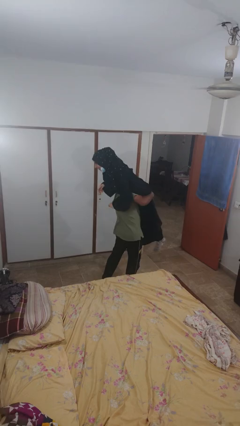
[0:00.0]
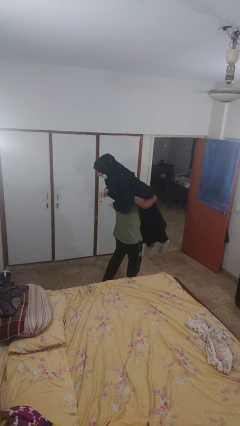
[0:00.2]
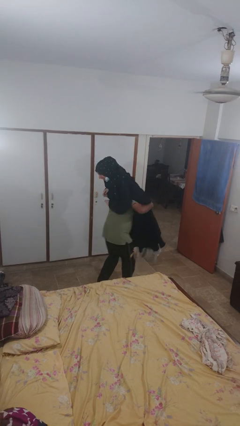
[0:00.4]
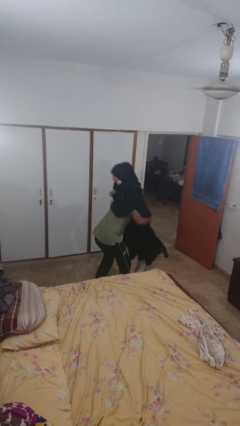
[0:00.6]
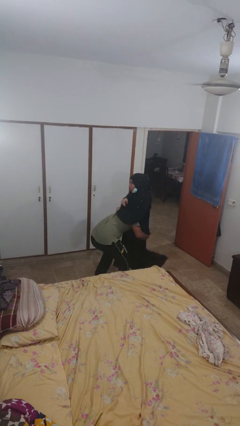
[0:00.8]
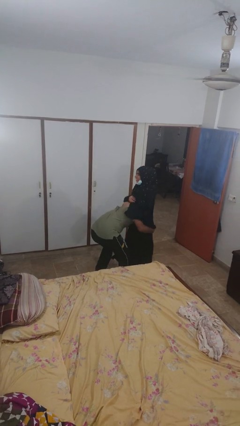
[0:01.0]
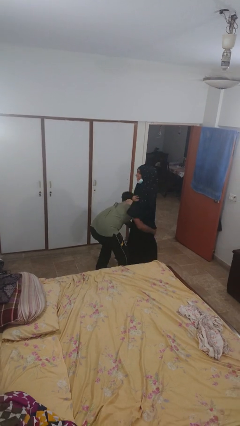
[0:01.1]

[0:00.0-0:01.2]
person puts down person

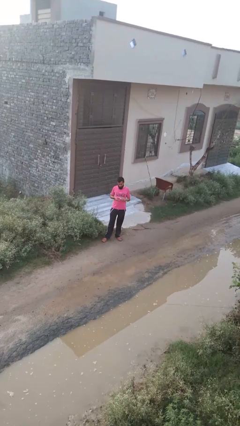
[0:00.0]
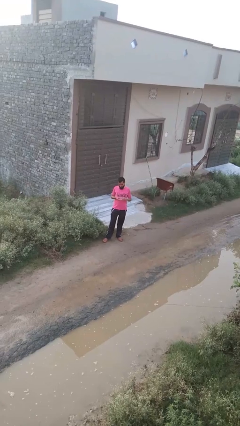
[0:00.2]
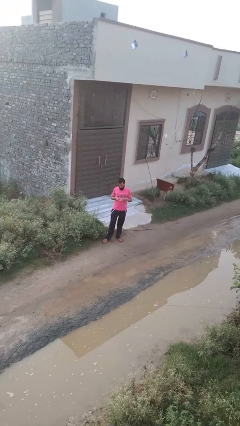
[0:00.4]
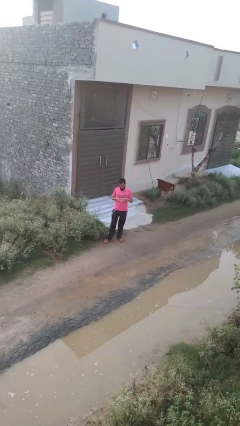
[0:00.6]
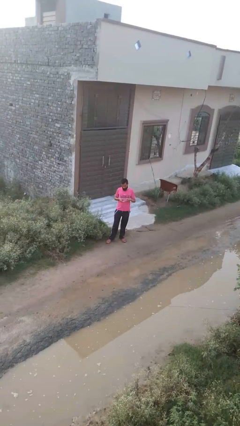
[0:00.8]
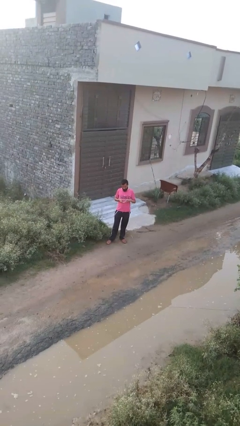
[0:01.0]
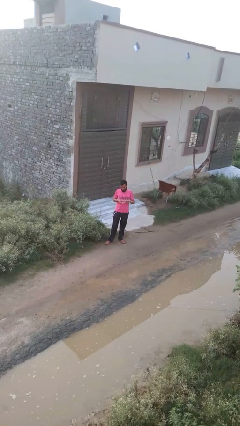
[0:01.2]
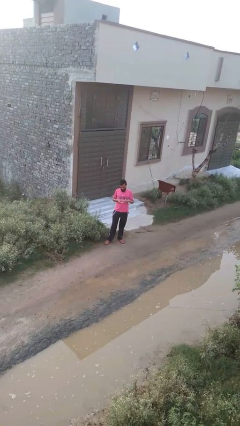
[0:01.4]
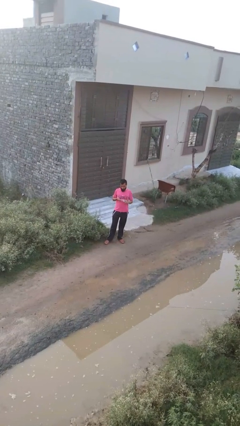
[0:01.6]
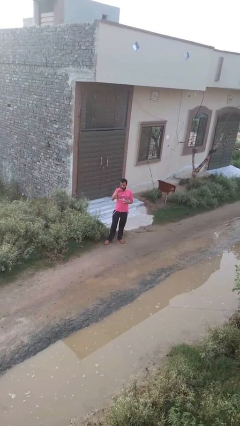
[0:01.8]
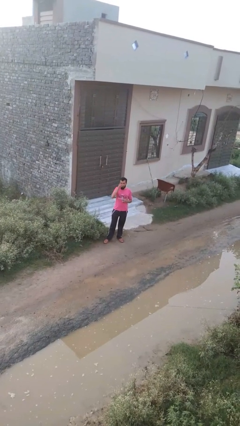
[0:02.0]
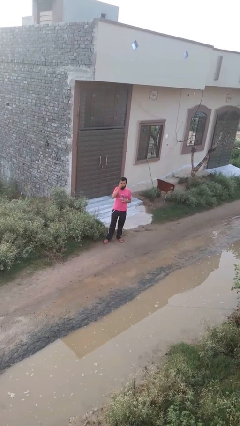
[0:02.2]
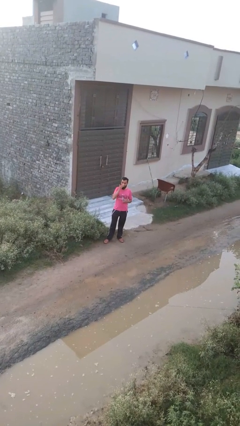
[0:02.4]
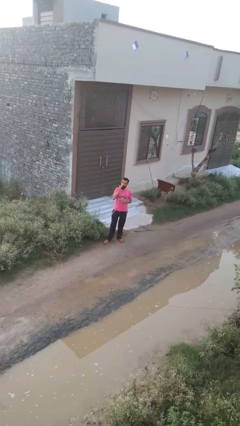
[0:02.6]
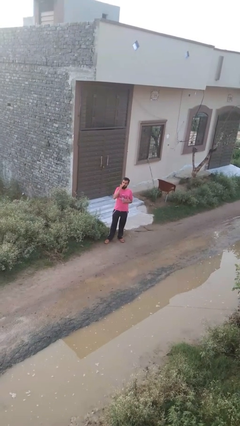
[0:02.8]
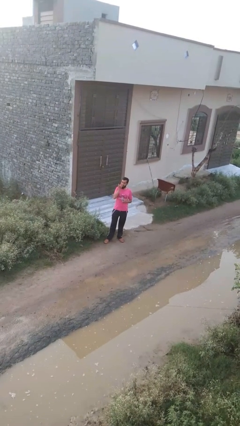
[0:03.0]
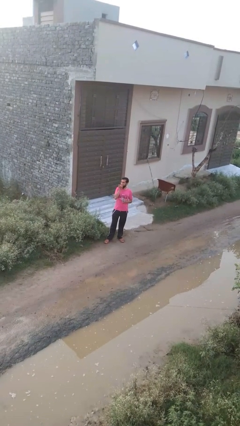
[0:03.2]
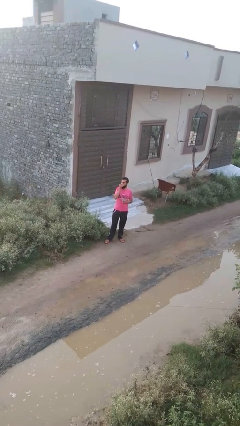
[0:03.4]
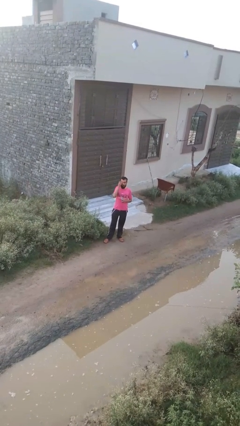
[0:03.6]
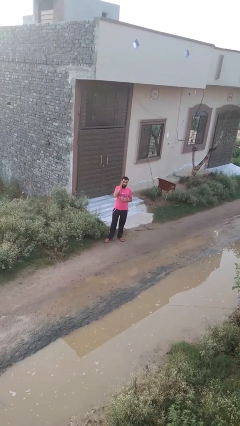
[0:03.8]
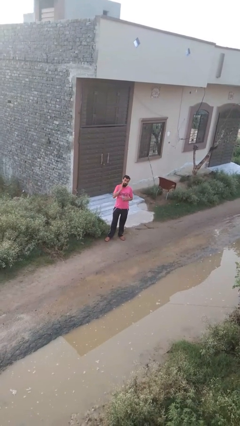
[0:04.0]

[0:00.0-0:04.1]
person applies facial moisturizer

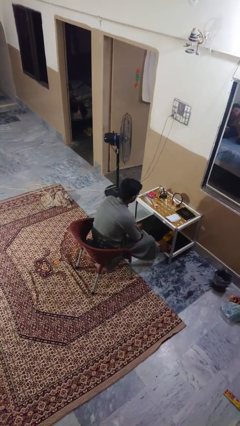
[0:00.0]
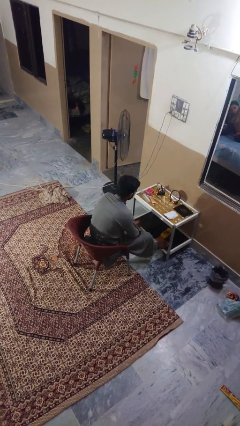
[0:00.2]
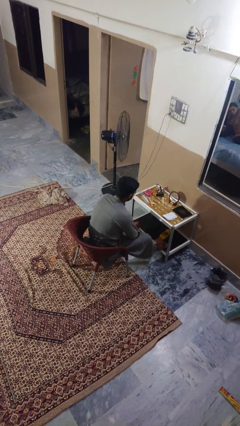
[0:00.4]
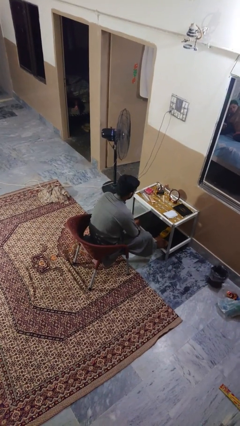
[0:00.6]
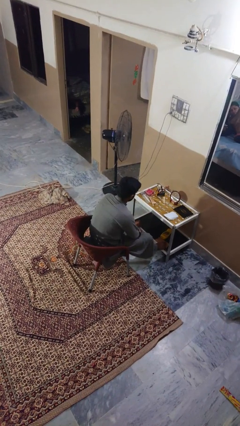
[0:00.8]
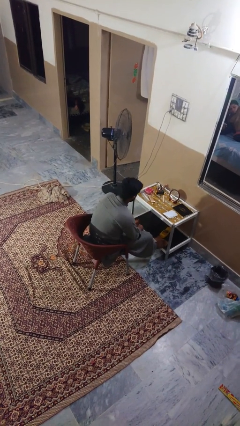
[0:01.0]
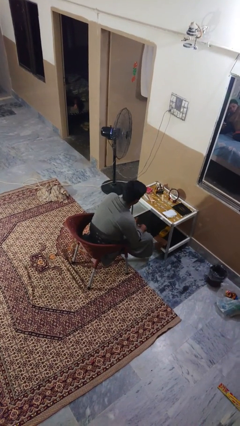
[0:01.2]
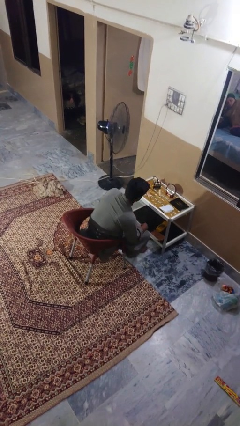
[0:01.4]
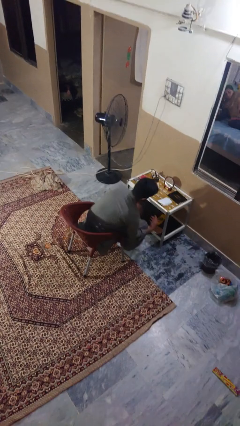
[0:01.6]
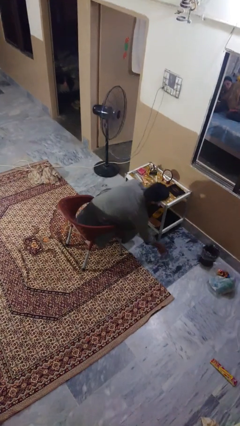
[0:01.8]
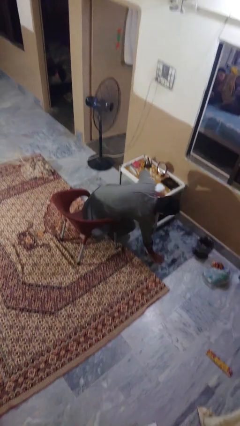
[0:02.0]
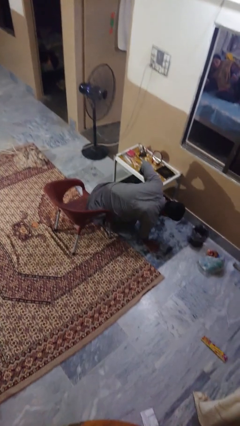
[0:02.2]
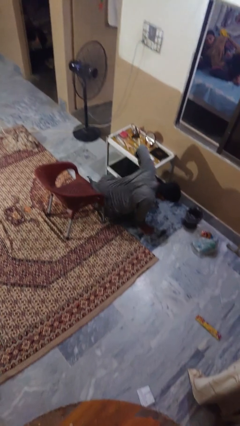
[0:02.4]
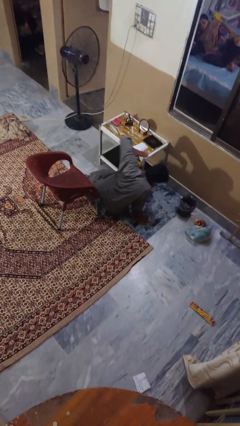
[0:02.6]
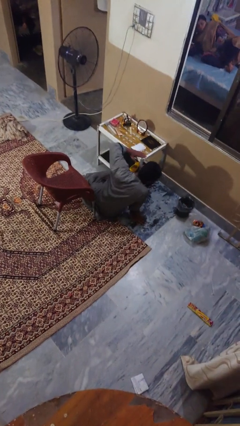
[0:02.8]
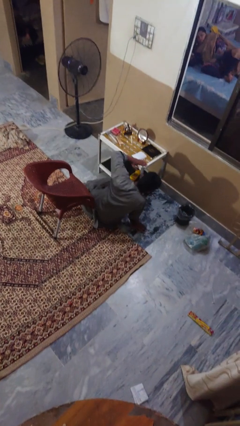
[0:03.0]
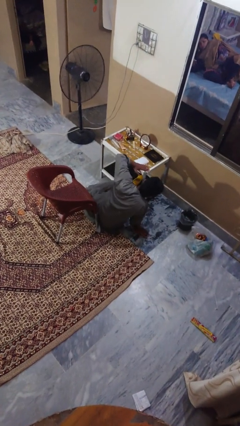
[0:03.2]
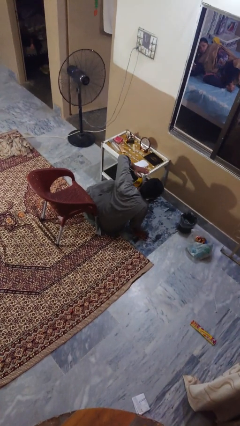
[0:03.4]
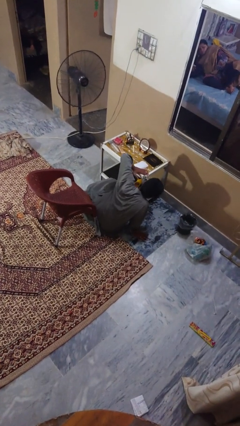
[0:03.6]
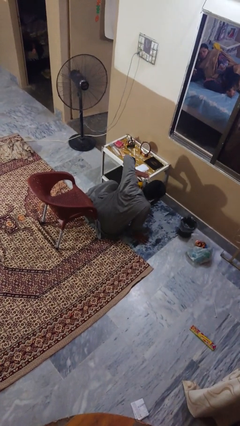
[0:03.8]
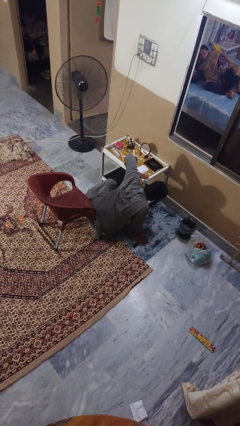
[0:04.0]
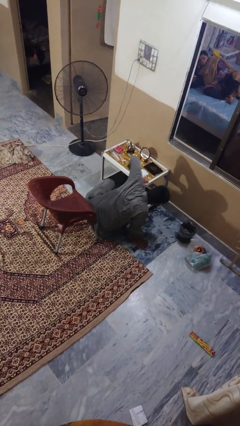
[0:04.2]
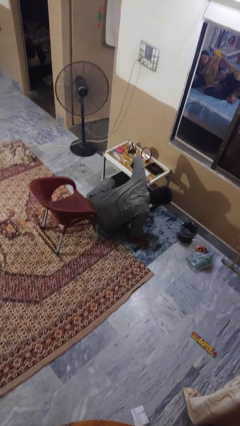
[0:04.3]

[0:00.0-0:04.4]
person falls from chair

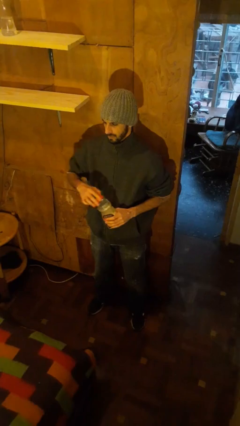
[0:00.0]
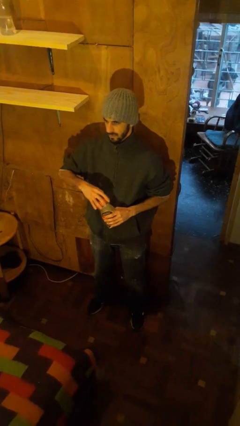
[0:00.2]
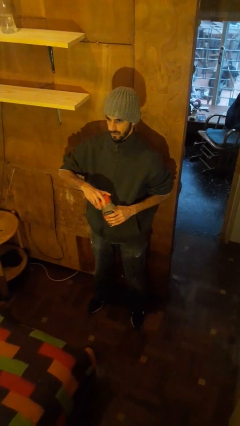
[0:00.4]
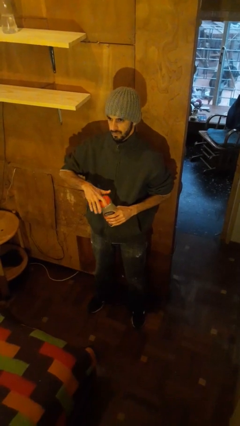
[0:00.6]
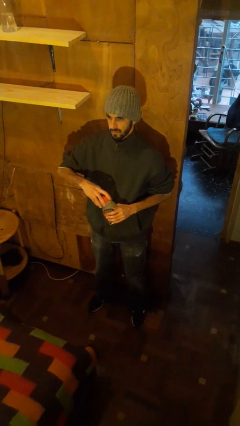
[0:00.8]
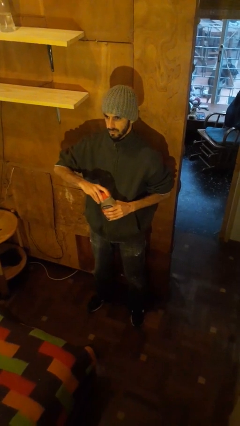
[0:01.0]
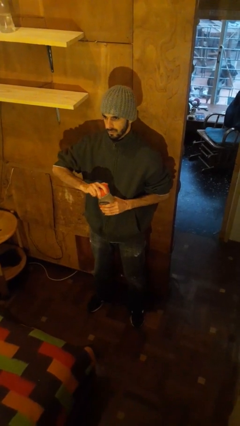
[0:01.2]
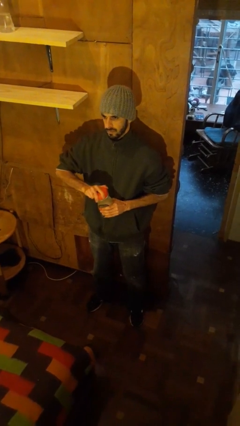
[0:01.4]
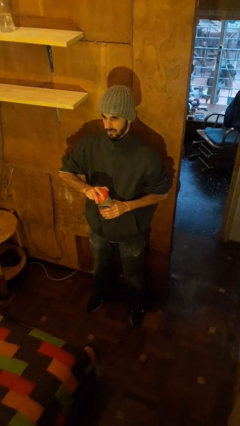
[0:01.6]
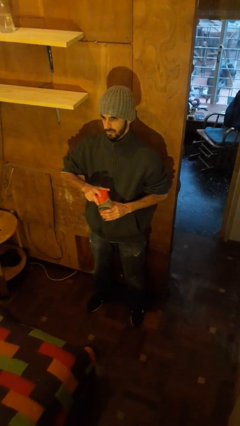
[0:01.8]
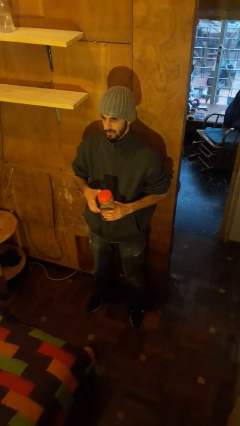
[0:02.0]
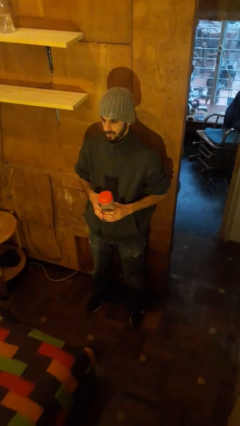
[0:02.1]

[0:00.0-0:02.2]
person closes jar

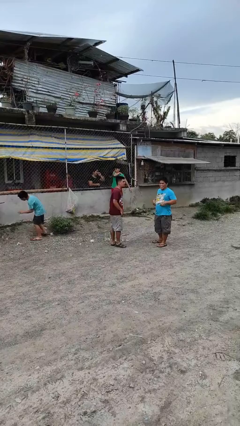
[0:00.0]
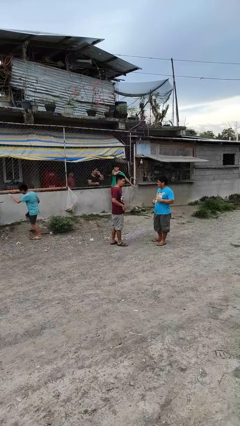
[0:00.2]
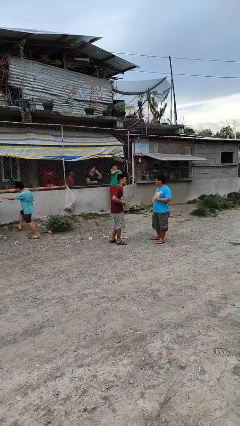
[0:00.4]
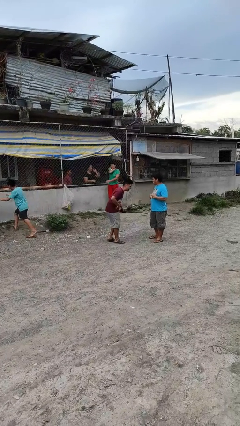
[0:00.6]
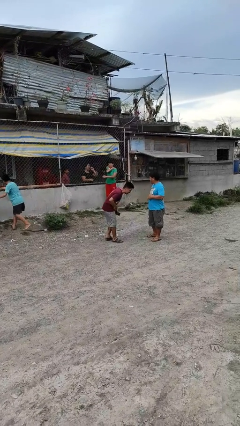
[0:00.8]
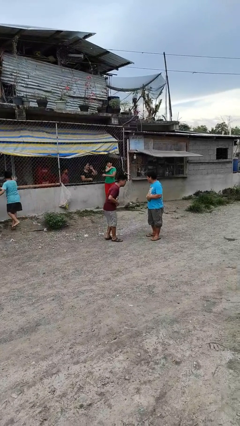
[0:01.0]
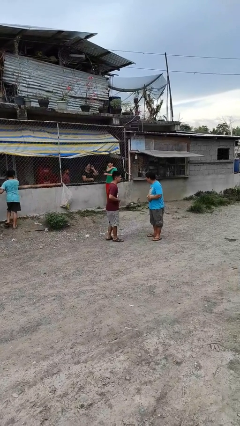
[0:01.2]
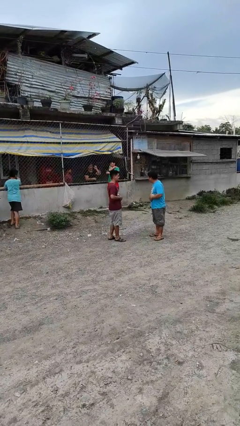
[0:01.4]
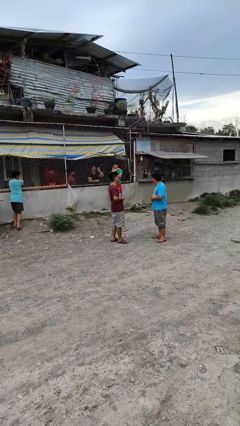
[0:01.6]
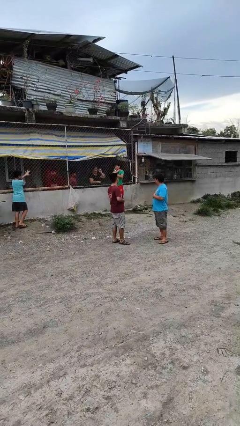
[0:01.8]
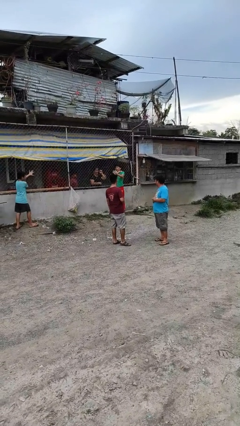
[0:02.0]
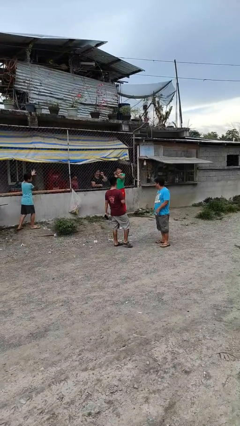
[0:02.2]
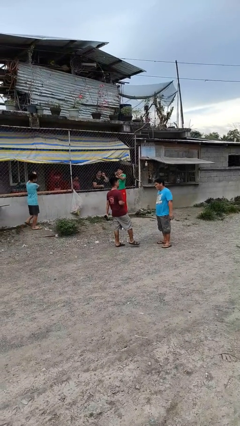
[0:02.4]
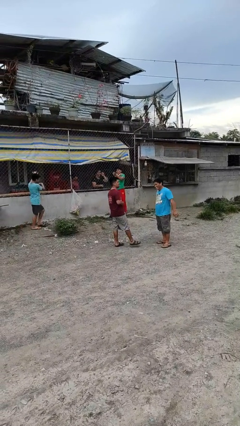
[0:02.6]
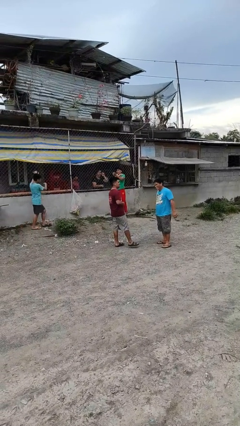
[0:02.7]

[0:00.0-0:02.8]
person laughs with person

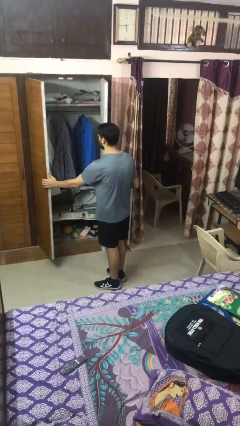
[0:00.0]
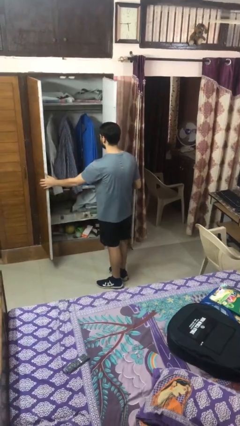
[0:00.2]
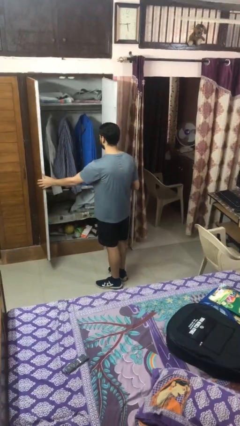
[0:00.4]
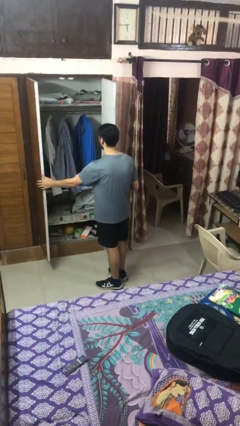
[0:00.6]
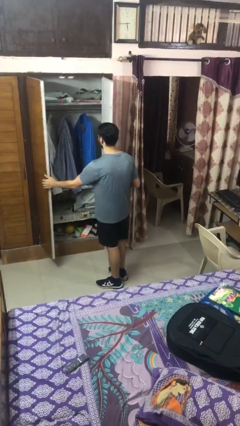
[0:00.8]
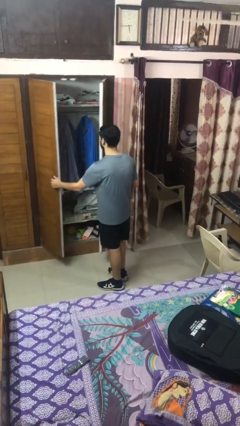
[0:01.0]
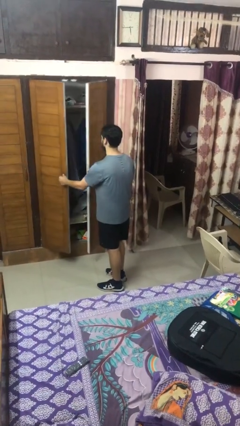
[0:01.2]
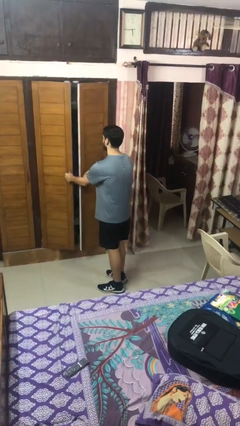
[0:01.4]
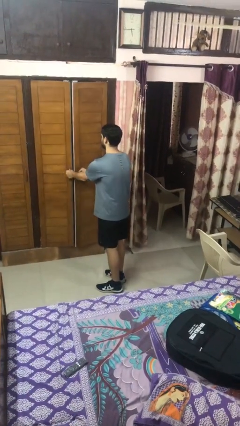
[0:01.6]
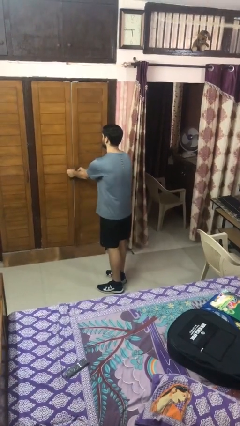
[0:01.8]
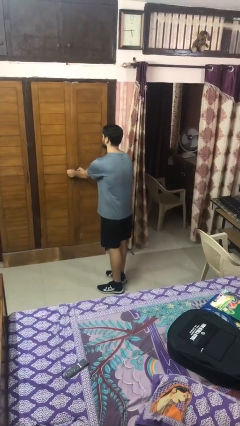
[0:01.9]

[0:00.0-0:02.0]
person closes closet door

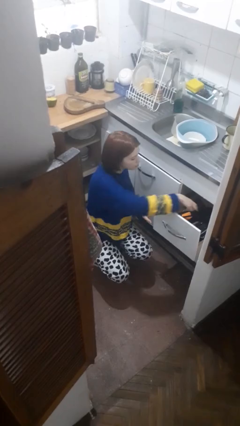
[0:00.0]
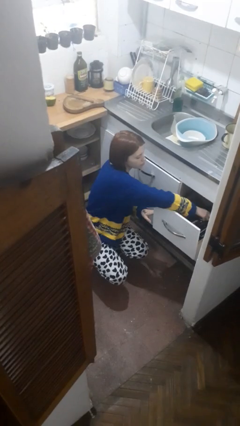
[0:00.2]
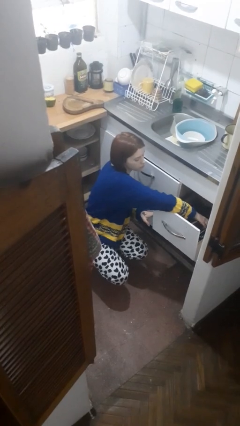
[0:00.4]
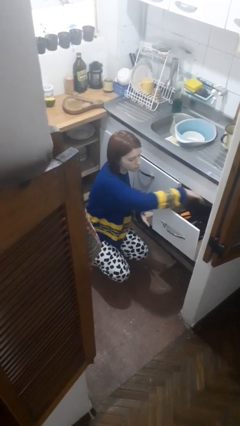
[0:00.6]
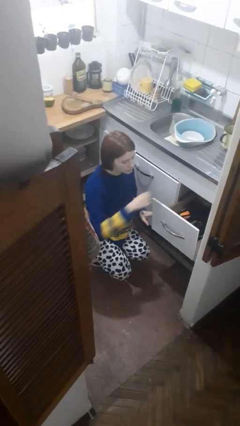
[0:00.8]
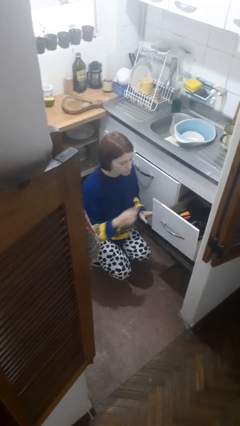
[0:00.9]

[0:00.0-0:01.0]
person puts object into kitchen drawer
